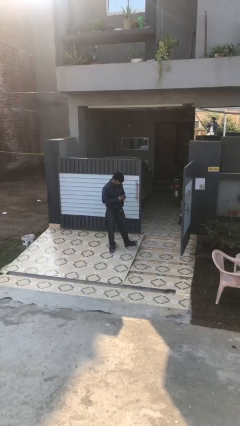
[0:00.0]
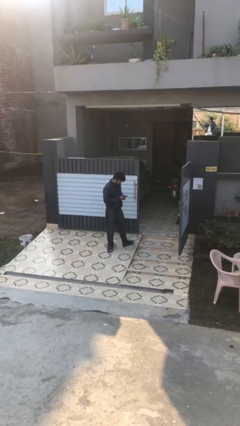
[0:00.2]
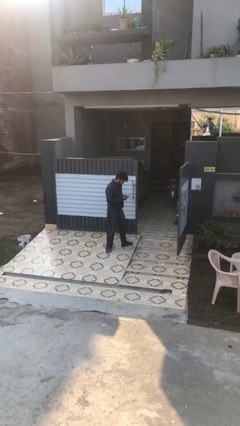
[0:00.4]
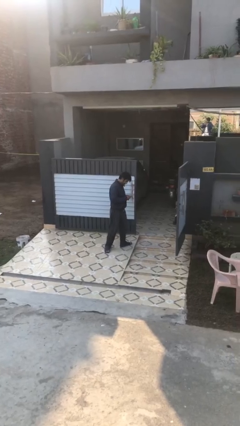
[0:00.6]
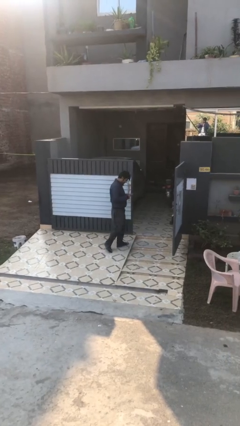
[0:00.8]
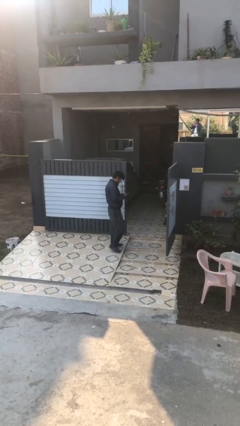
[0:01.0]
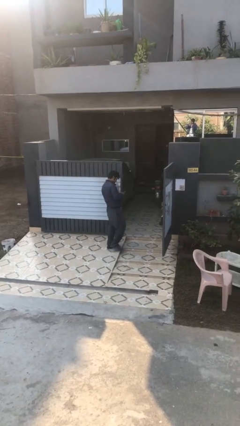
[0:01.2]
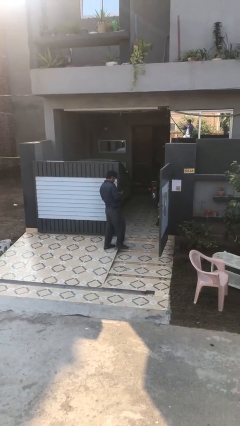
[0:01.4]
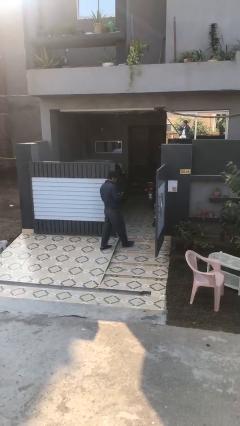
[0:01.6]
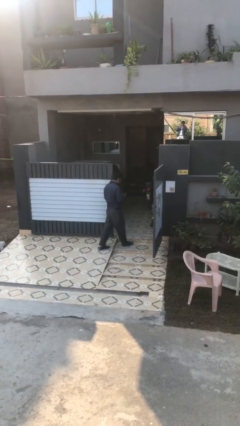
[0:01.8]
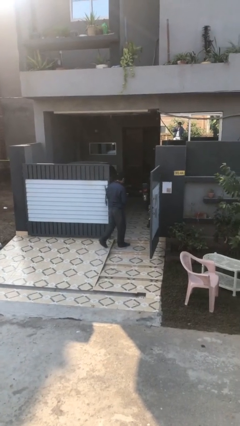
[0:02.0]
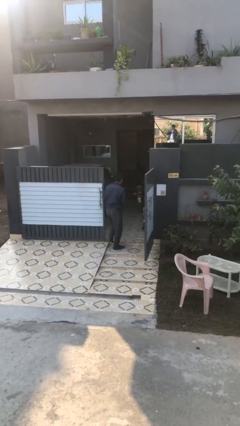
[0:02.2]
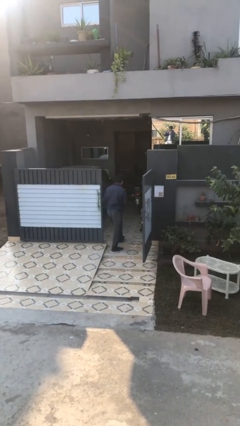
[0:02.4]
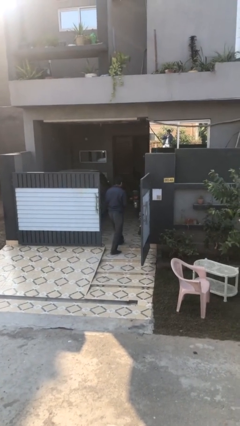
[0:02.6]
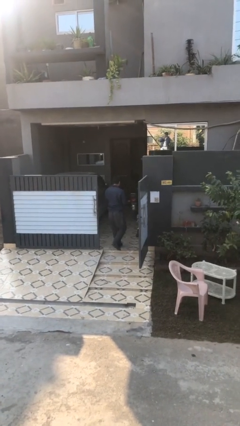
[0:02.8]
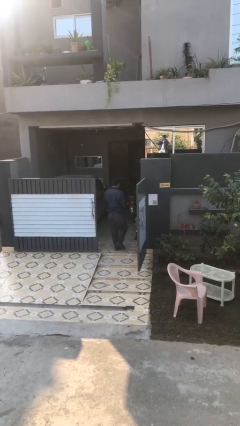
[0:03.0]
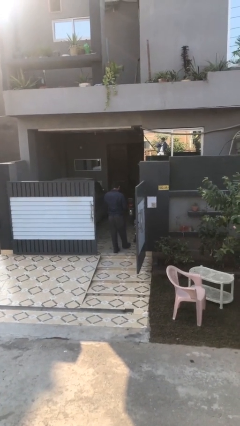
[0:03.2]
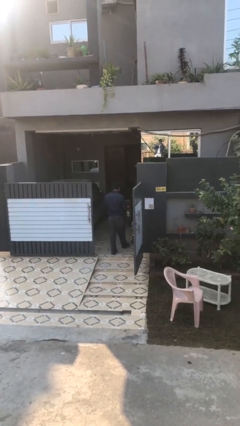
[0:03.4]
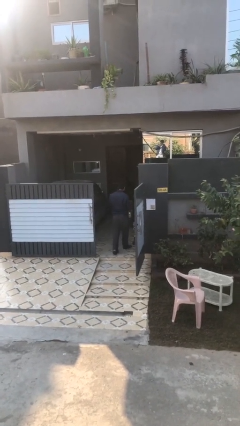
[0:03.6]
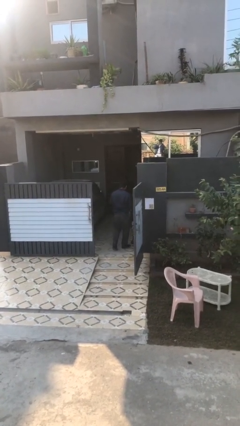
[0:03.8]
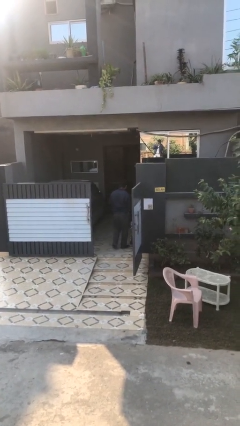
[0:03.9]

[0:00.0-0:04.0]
person exits scene through structure

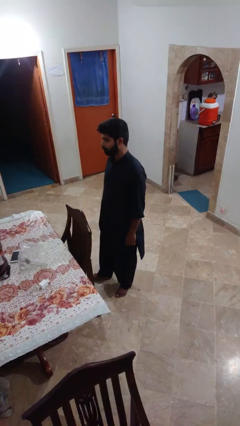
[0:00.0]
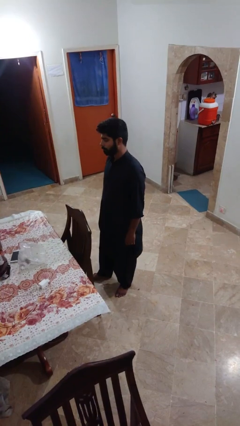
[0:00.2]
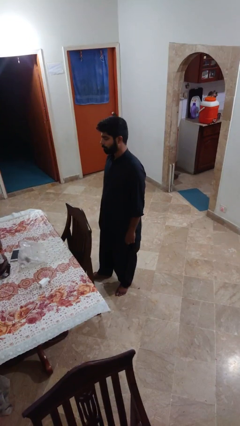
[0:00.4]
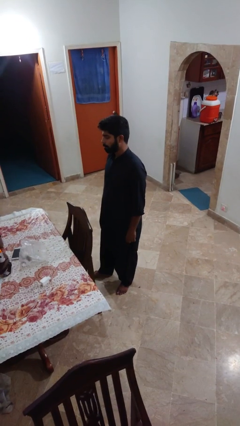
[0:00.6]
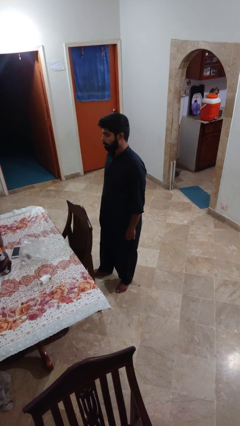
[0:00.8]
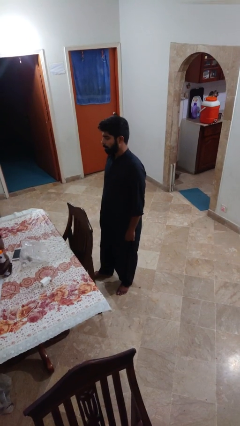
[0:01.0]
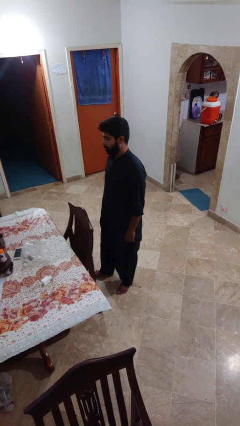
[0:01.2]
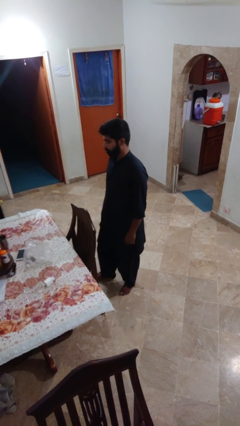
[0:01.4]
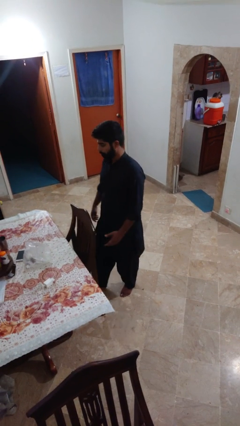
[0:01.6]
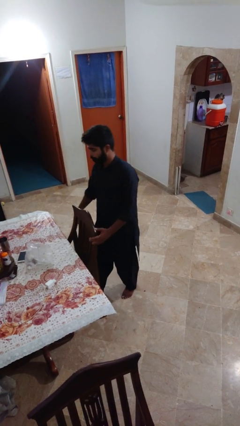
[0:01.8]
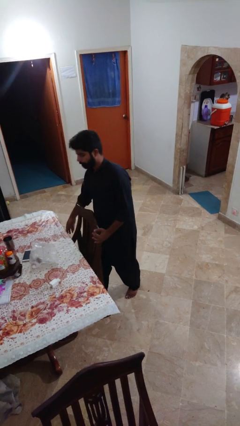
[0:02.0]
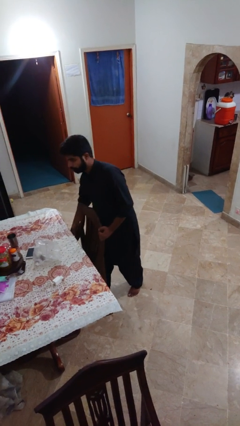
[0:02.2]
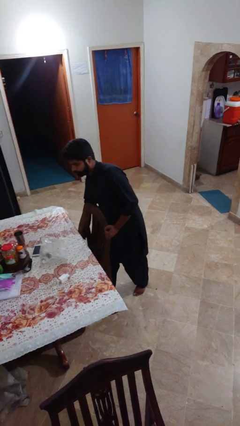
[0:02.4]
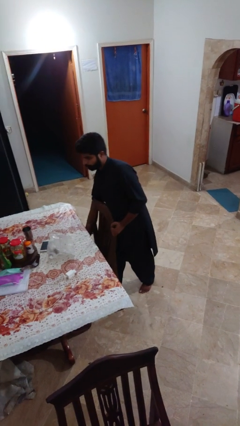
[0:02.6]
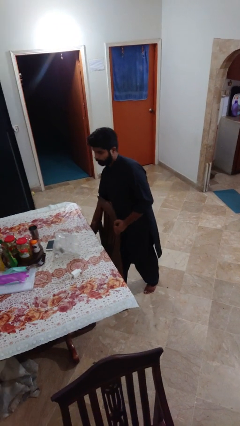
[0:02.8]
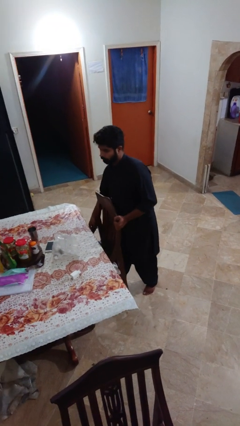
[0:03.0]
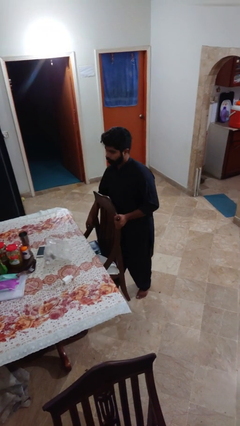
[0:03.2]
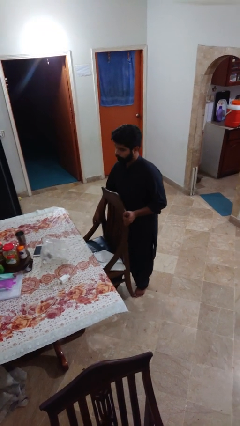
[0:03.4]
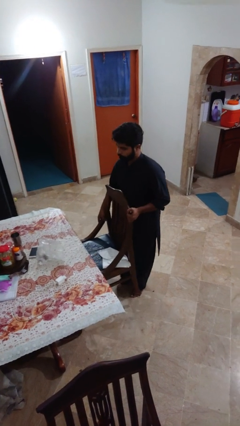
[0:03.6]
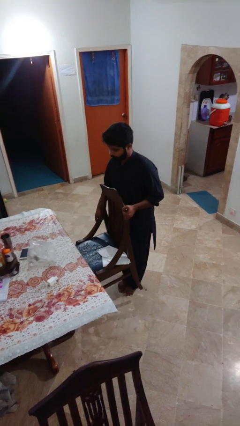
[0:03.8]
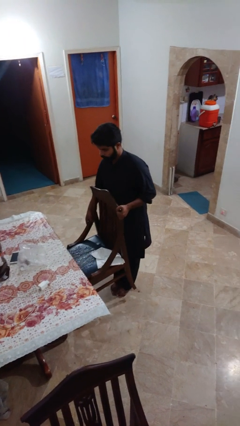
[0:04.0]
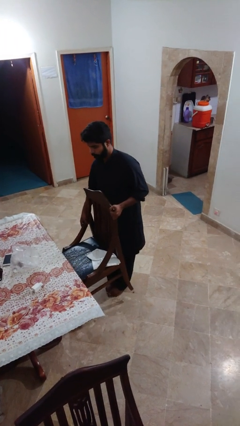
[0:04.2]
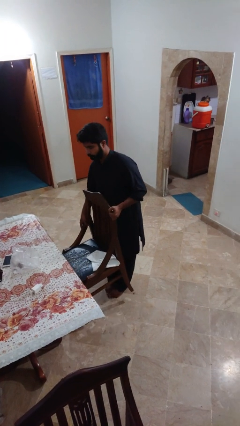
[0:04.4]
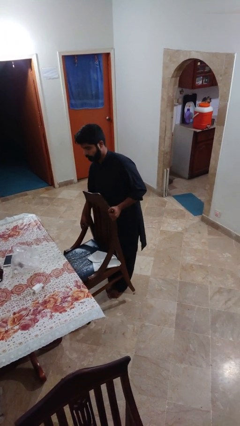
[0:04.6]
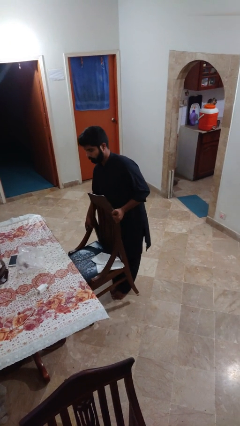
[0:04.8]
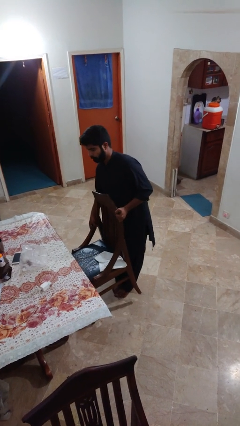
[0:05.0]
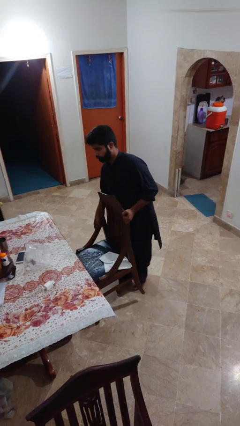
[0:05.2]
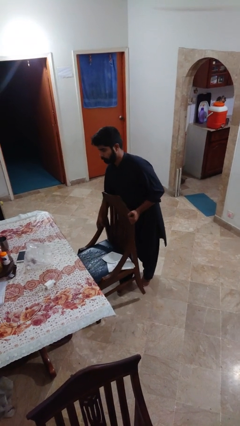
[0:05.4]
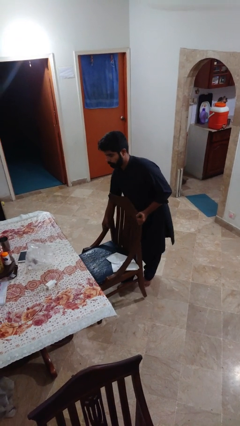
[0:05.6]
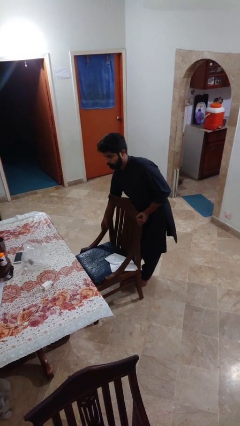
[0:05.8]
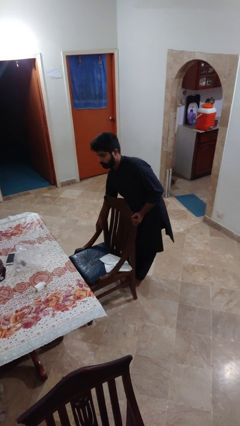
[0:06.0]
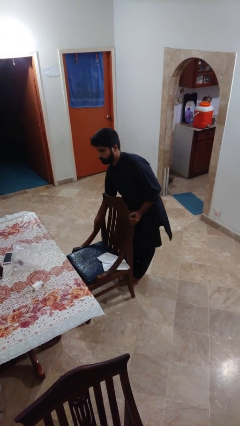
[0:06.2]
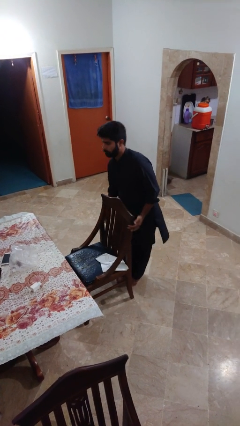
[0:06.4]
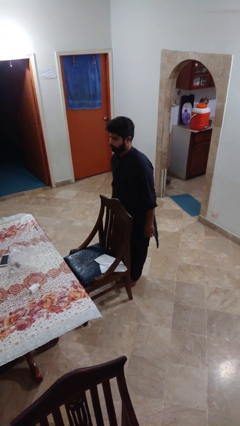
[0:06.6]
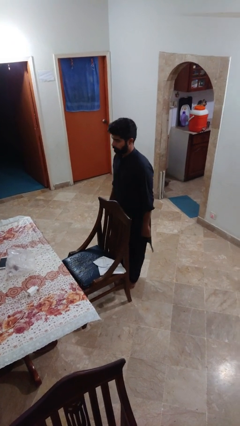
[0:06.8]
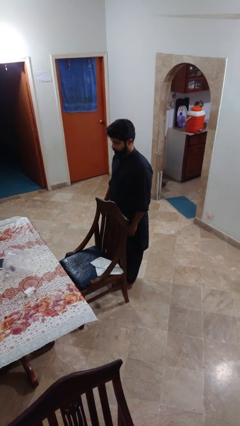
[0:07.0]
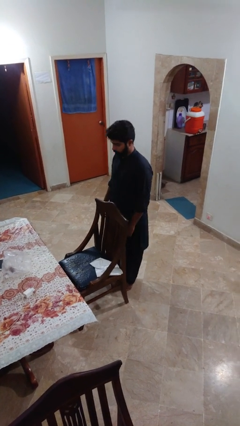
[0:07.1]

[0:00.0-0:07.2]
person pulls out chair

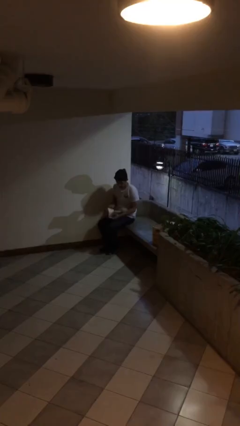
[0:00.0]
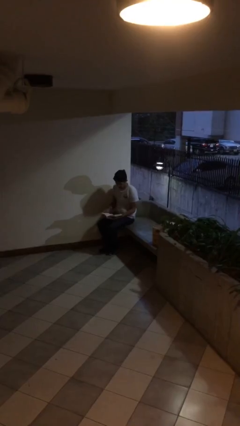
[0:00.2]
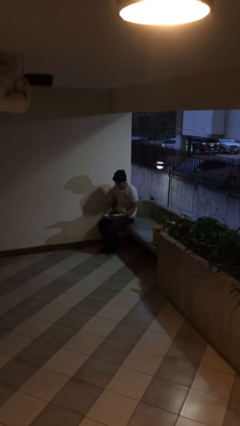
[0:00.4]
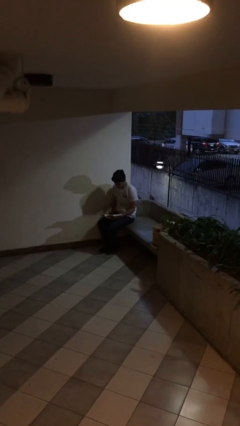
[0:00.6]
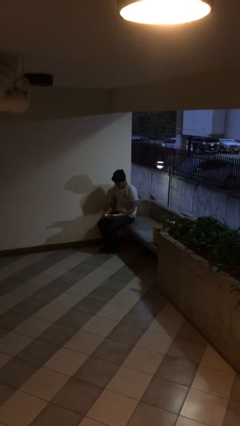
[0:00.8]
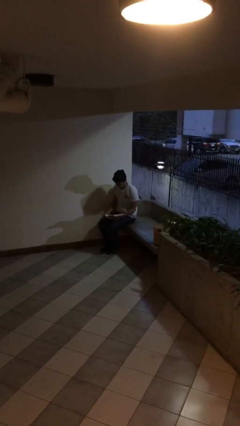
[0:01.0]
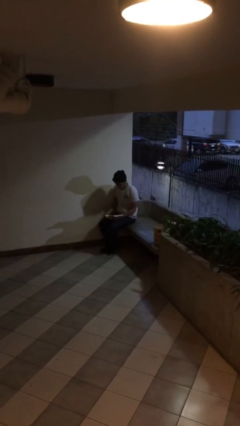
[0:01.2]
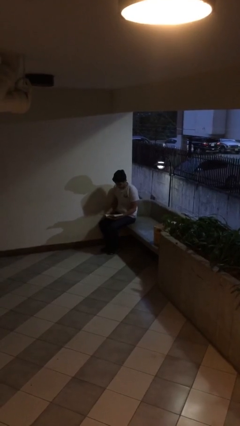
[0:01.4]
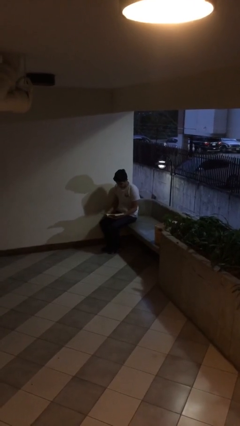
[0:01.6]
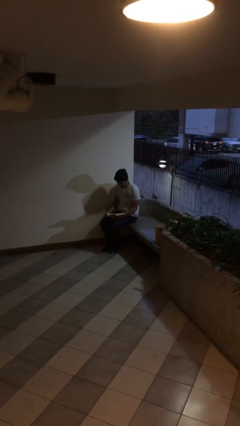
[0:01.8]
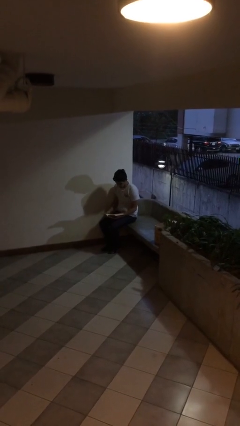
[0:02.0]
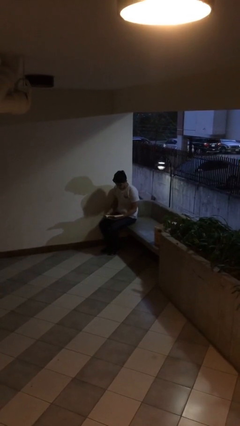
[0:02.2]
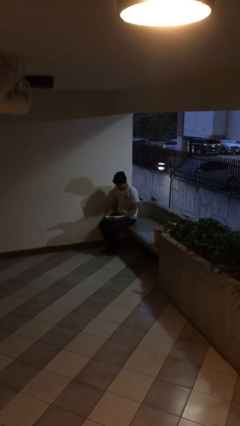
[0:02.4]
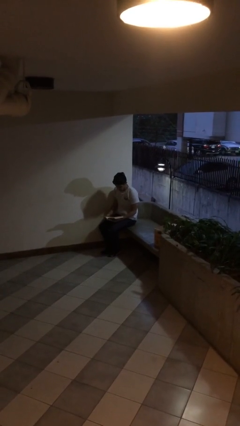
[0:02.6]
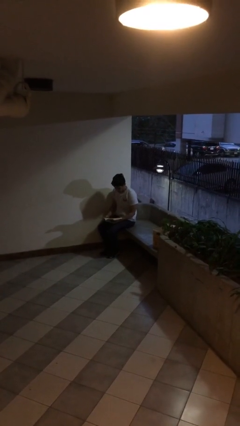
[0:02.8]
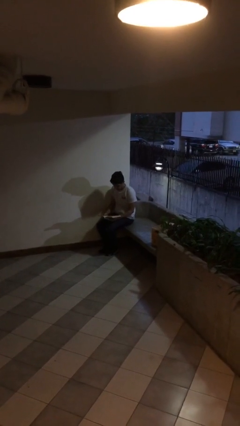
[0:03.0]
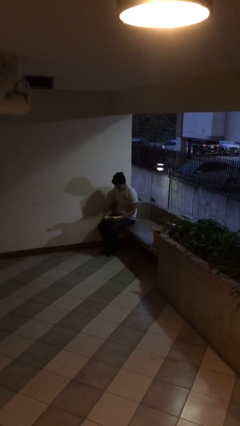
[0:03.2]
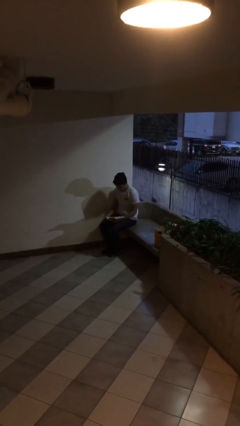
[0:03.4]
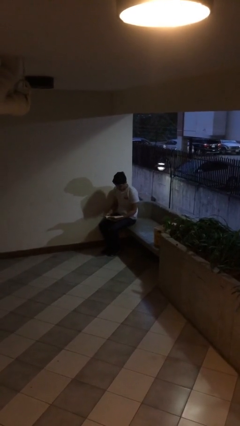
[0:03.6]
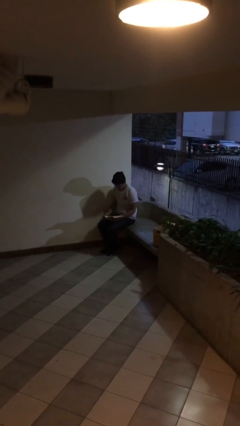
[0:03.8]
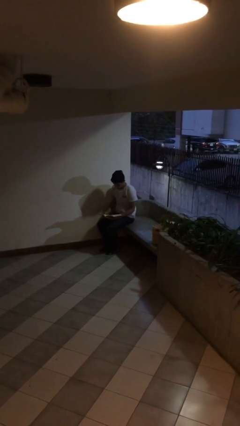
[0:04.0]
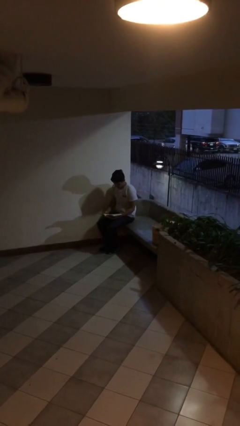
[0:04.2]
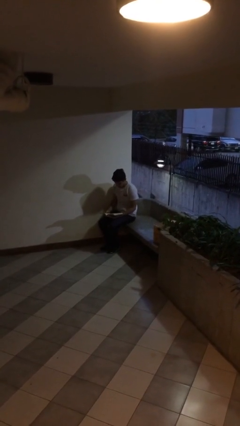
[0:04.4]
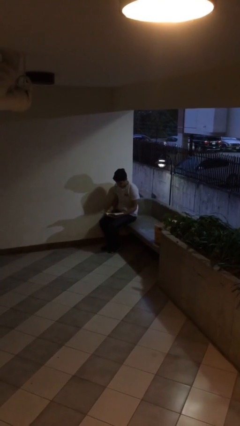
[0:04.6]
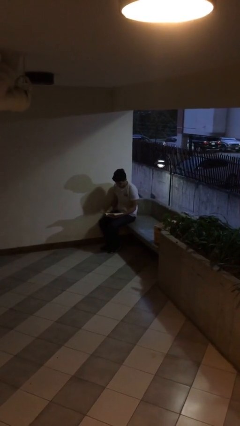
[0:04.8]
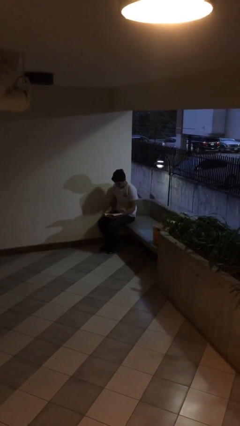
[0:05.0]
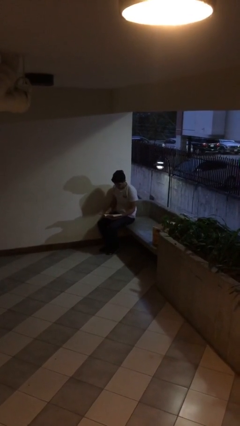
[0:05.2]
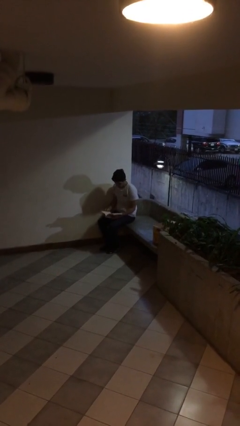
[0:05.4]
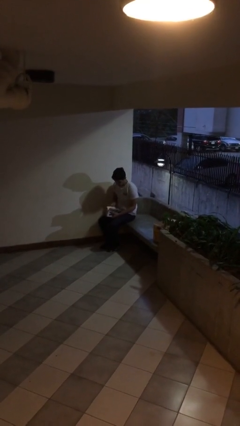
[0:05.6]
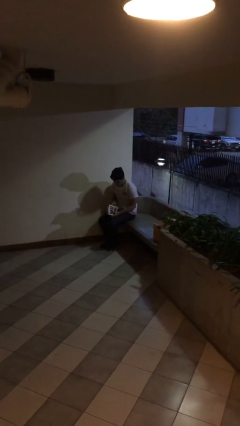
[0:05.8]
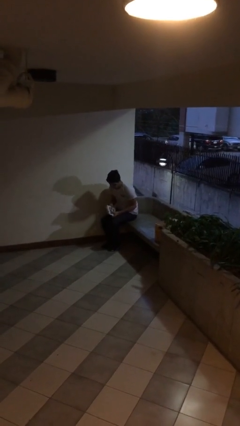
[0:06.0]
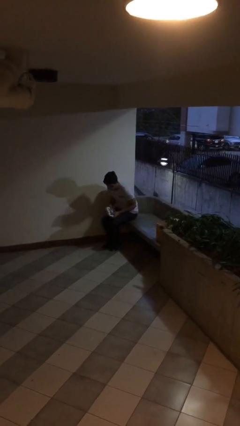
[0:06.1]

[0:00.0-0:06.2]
person reads document
